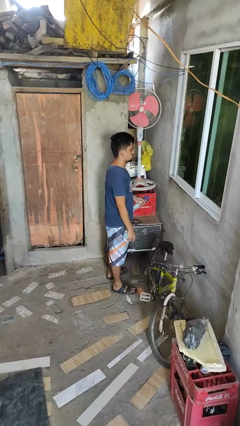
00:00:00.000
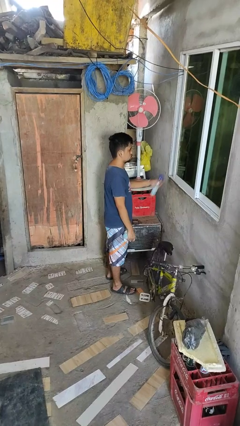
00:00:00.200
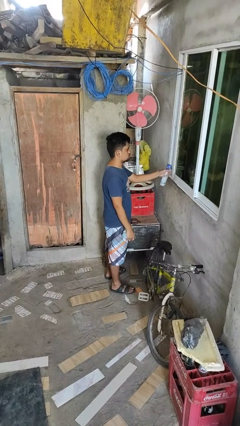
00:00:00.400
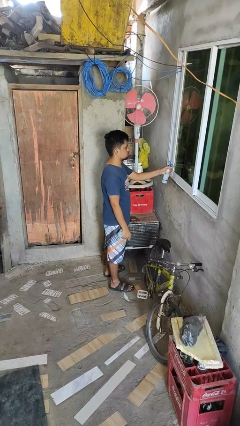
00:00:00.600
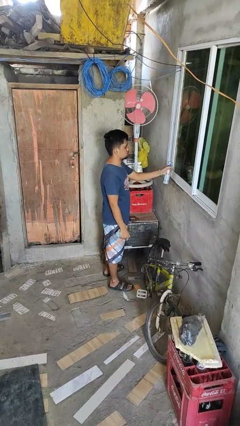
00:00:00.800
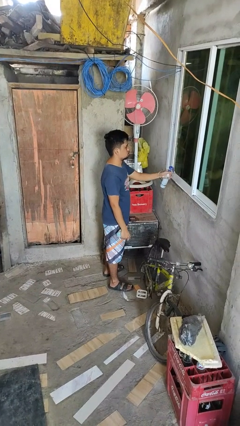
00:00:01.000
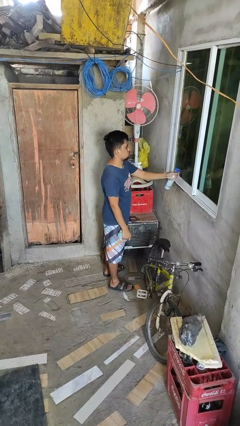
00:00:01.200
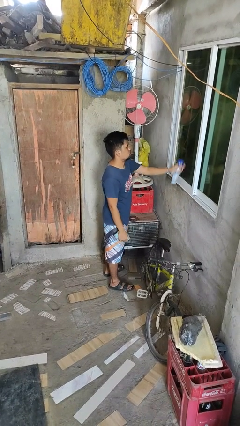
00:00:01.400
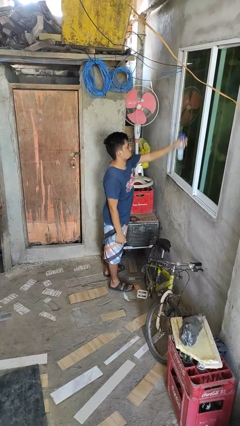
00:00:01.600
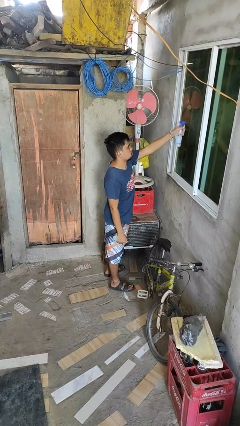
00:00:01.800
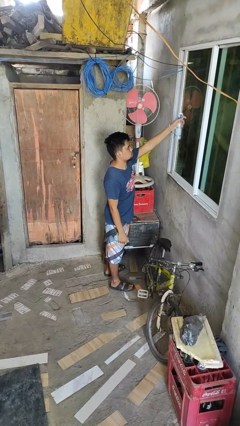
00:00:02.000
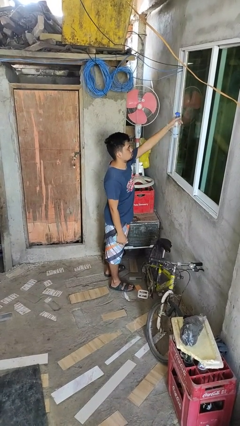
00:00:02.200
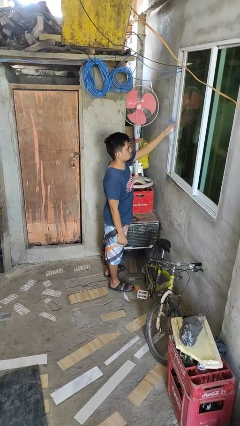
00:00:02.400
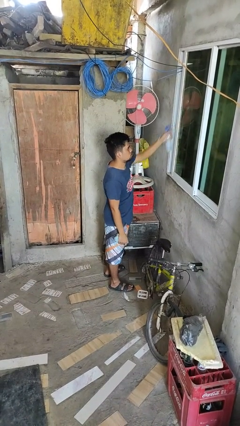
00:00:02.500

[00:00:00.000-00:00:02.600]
person sprays from bottle

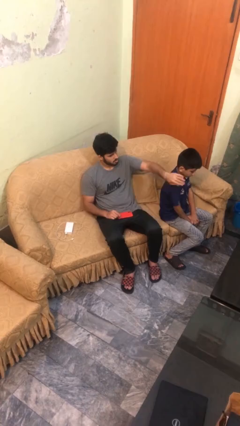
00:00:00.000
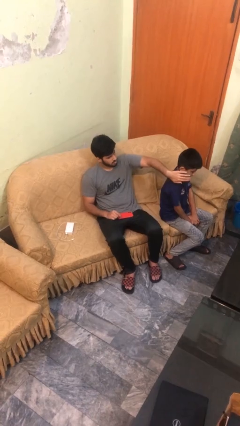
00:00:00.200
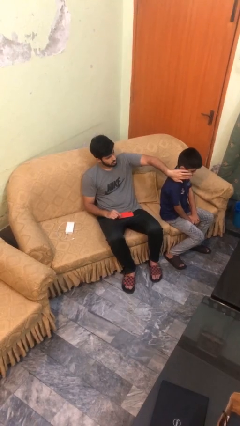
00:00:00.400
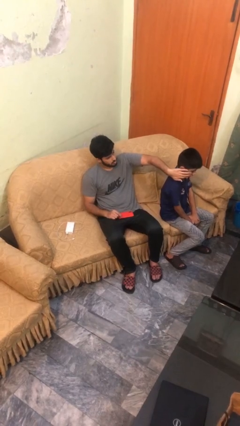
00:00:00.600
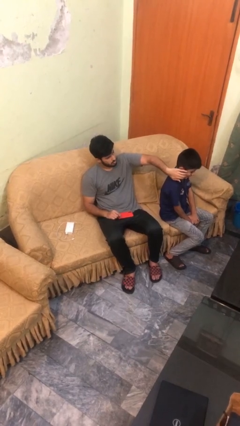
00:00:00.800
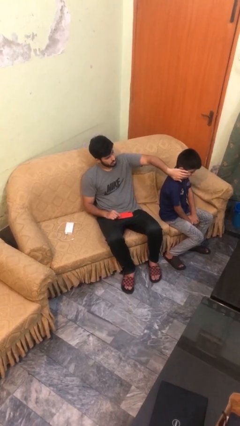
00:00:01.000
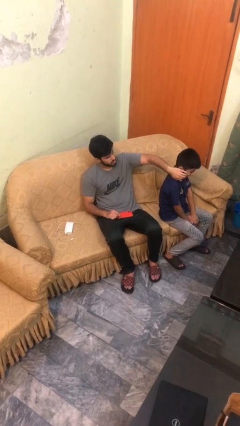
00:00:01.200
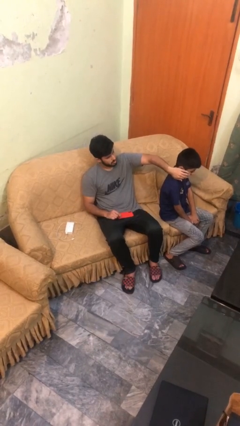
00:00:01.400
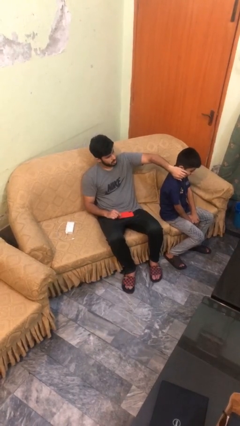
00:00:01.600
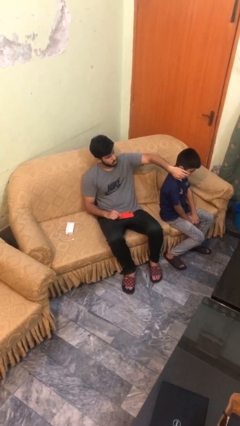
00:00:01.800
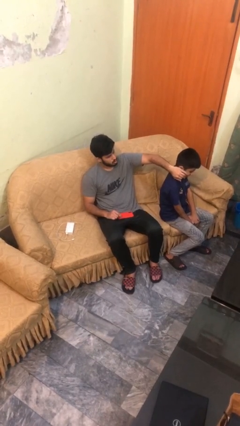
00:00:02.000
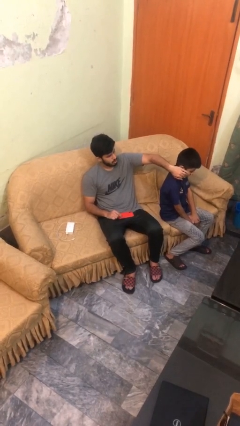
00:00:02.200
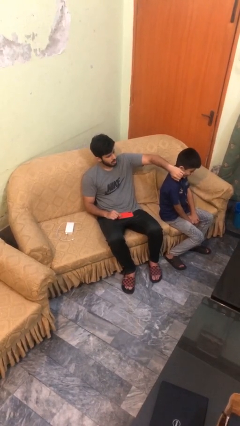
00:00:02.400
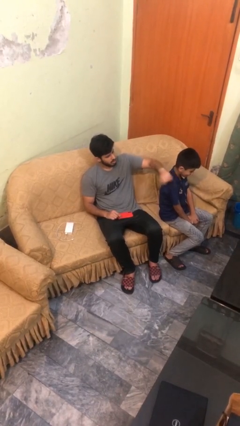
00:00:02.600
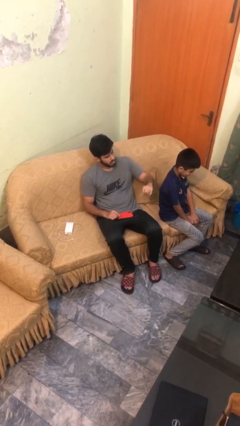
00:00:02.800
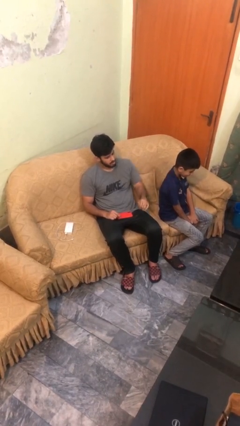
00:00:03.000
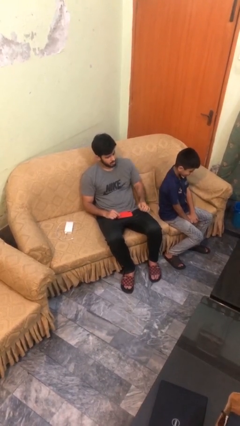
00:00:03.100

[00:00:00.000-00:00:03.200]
person touches face of person

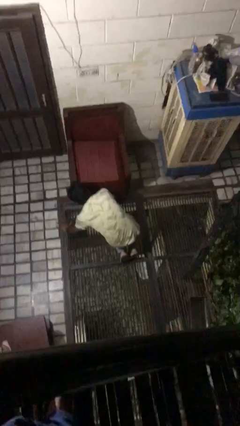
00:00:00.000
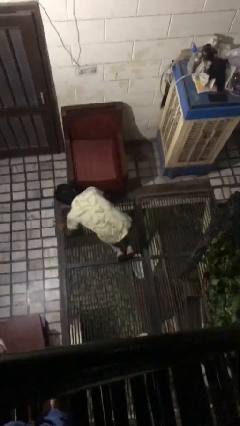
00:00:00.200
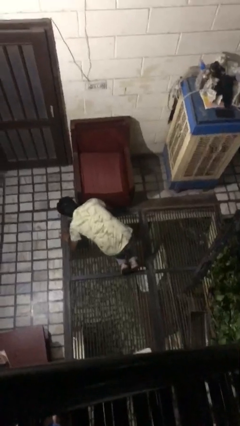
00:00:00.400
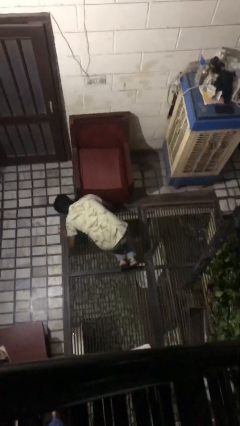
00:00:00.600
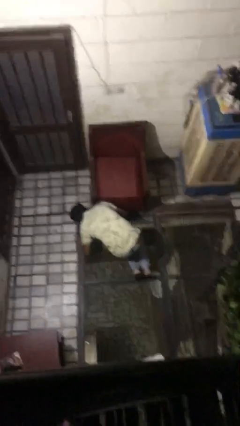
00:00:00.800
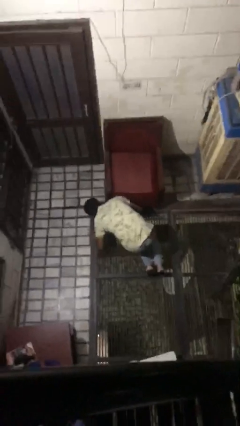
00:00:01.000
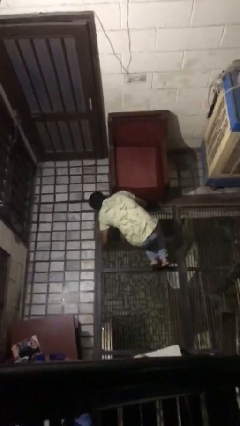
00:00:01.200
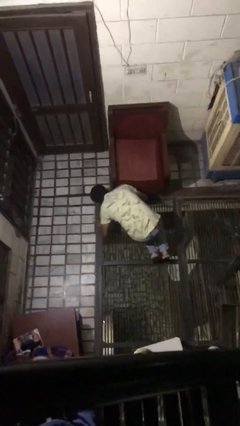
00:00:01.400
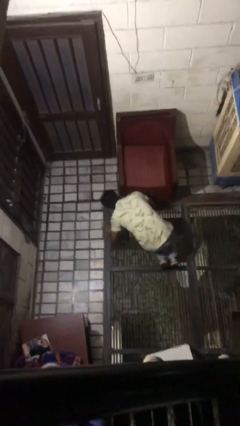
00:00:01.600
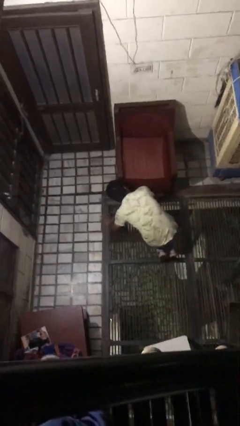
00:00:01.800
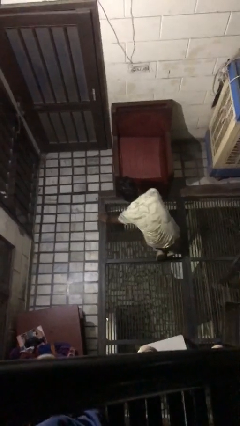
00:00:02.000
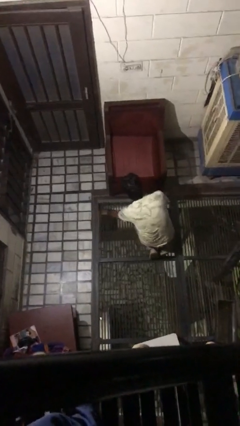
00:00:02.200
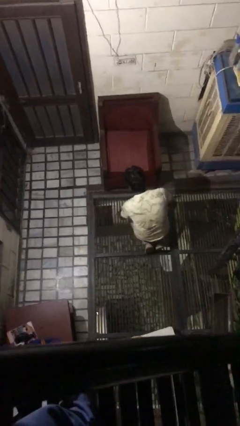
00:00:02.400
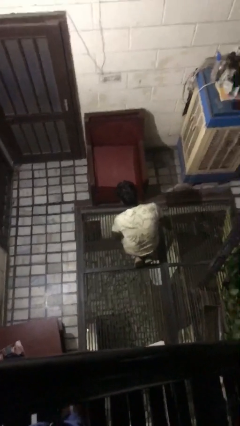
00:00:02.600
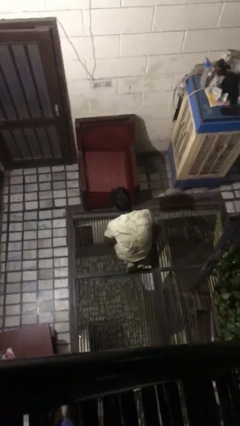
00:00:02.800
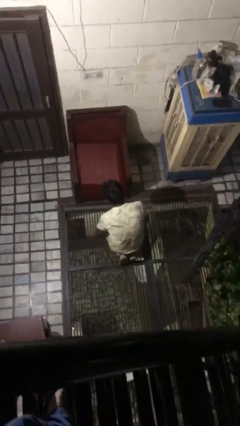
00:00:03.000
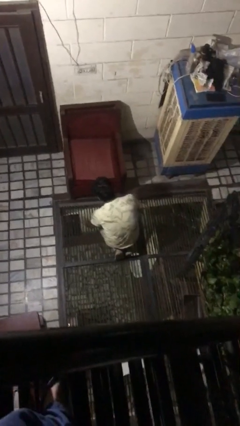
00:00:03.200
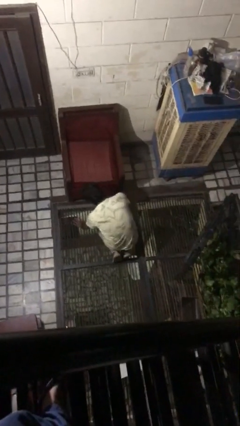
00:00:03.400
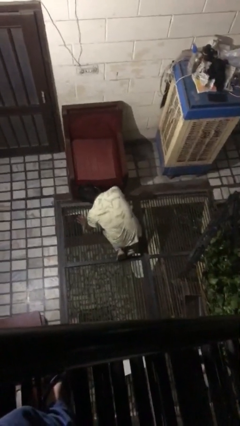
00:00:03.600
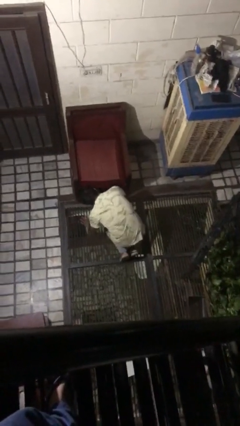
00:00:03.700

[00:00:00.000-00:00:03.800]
person searches under couch

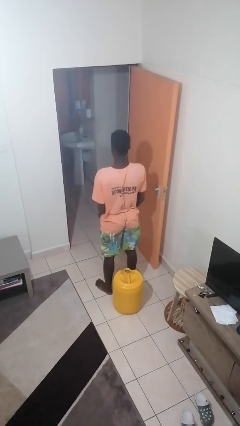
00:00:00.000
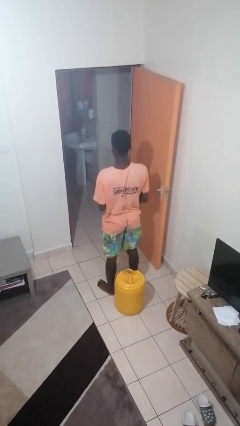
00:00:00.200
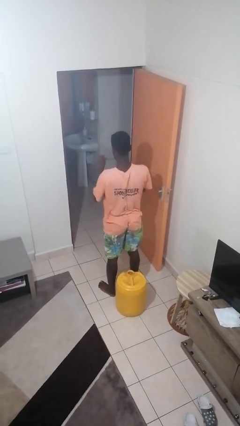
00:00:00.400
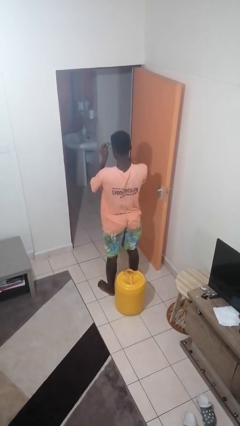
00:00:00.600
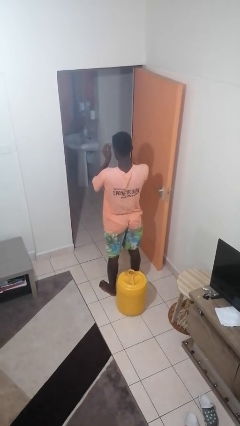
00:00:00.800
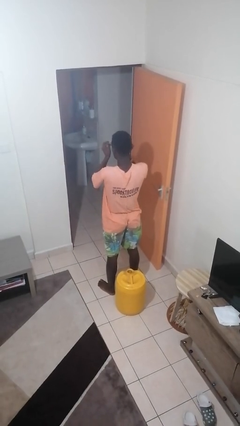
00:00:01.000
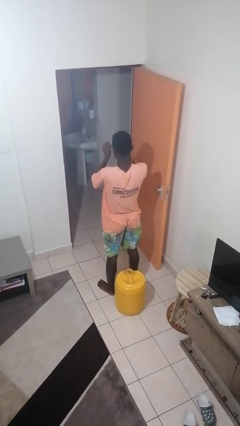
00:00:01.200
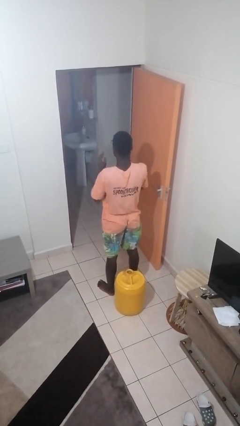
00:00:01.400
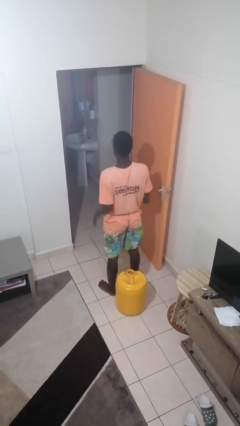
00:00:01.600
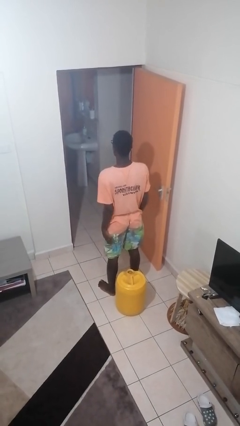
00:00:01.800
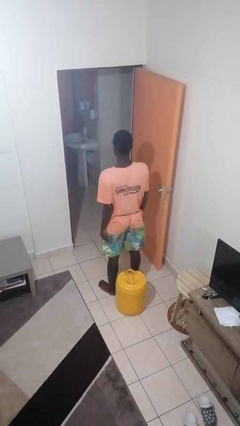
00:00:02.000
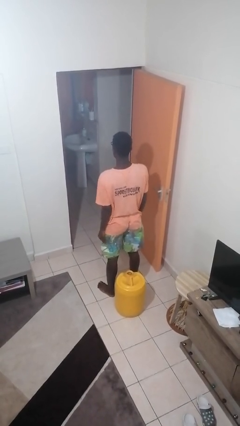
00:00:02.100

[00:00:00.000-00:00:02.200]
person puts on glasses

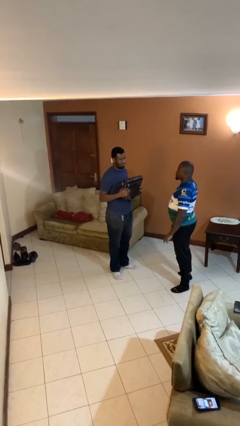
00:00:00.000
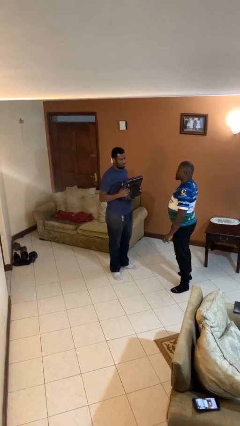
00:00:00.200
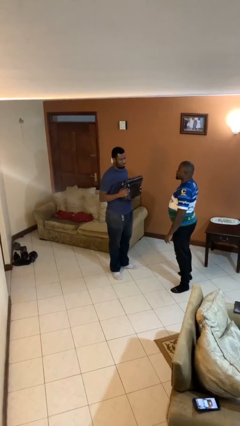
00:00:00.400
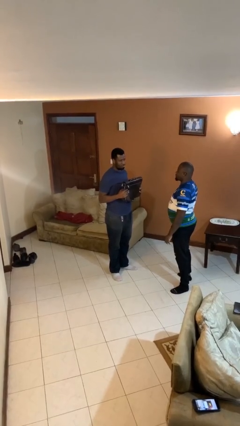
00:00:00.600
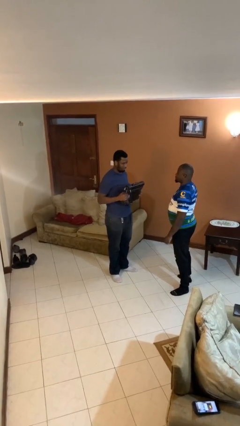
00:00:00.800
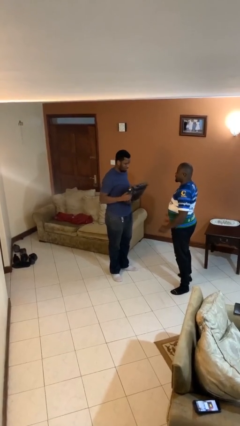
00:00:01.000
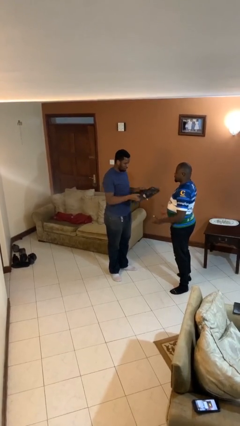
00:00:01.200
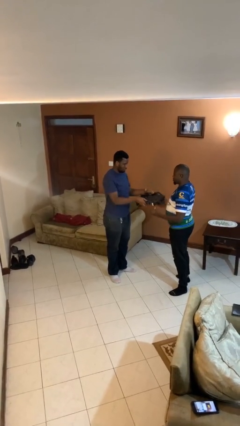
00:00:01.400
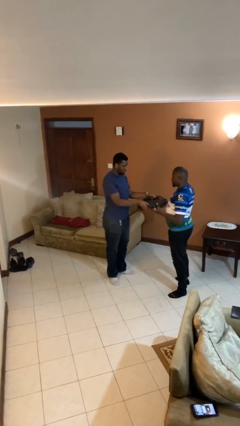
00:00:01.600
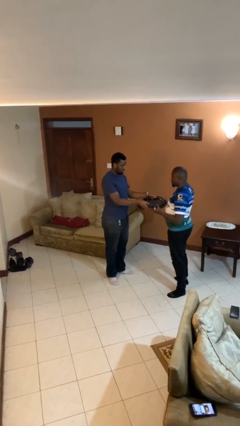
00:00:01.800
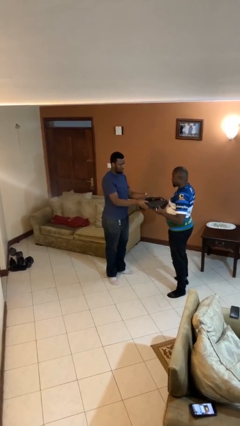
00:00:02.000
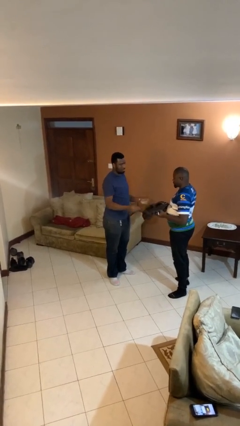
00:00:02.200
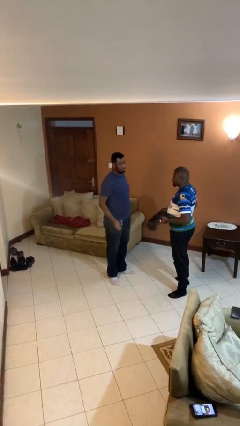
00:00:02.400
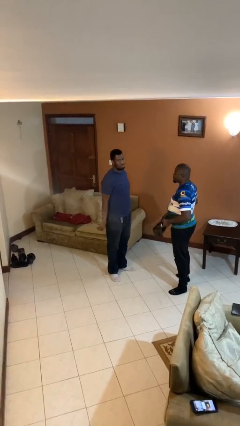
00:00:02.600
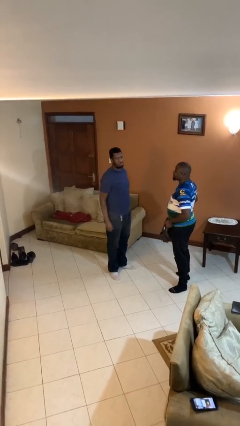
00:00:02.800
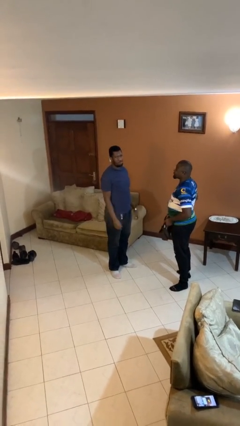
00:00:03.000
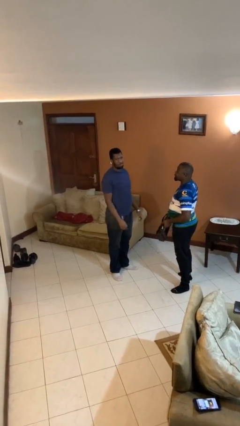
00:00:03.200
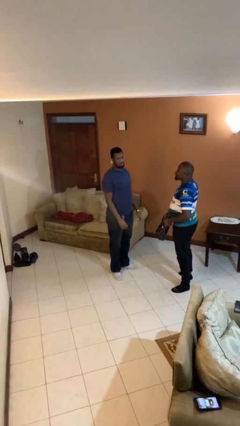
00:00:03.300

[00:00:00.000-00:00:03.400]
person transfers object to person

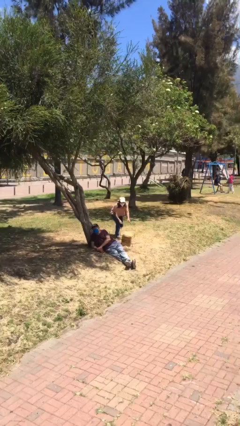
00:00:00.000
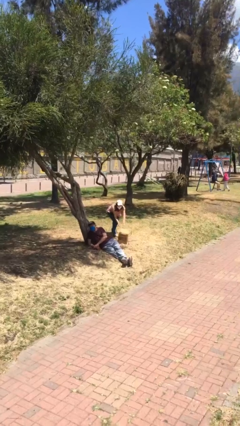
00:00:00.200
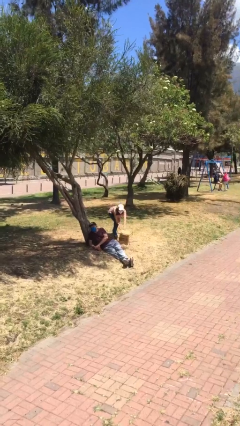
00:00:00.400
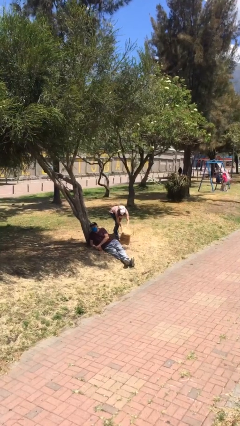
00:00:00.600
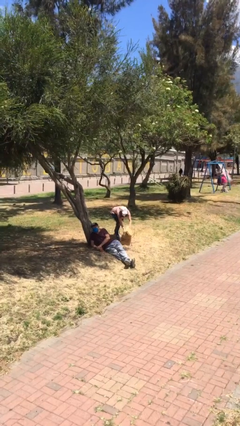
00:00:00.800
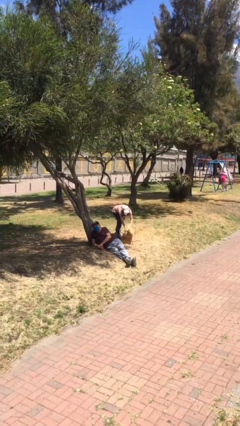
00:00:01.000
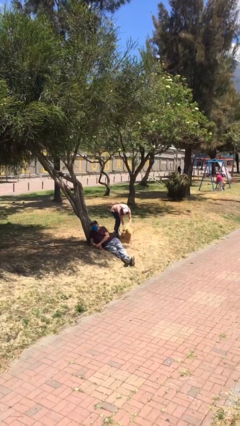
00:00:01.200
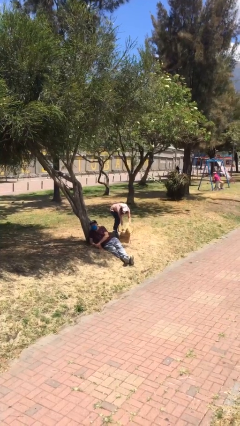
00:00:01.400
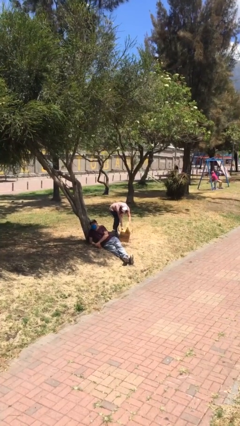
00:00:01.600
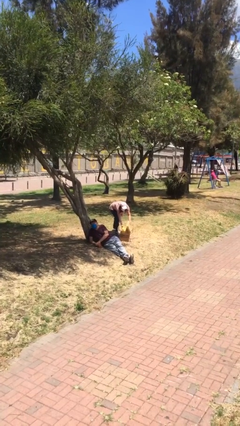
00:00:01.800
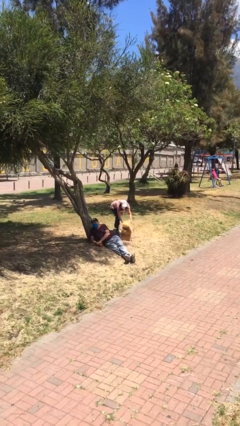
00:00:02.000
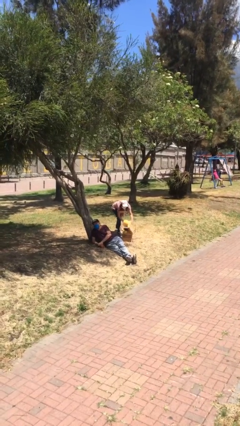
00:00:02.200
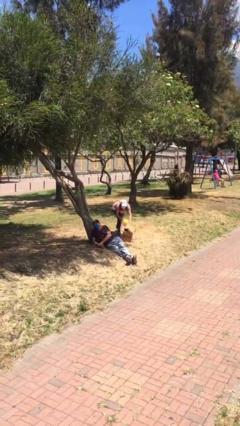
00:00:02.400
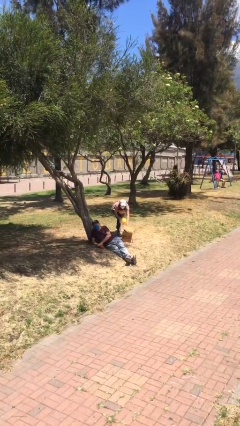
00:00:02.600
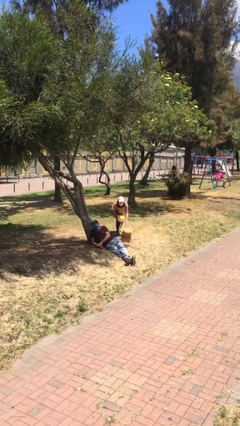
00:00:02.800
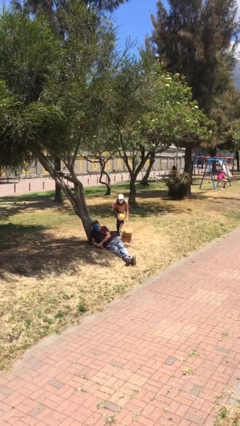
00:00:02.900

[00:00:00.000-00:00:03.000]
person steals object from person
